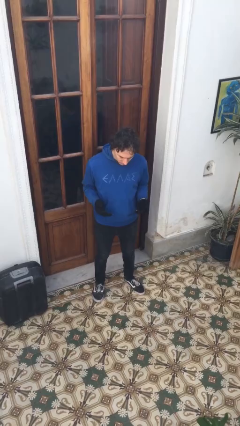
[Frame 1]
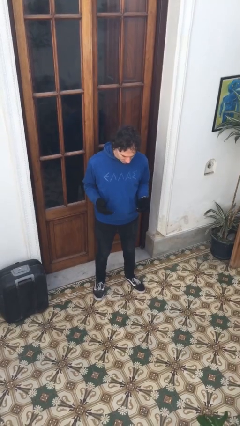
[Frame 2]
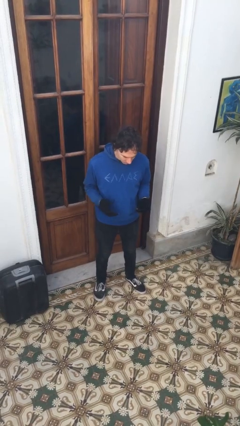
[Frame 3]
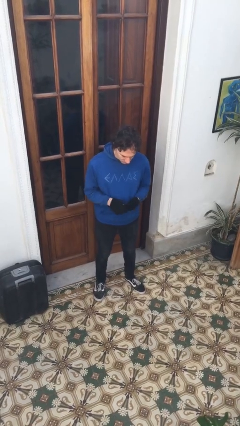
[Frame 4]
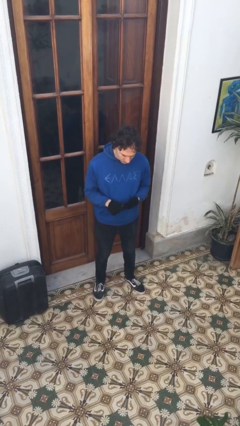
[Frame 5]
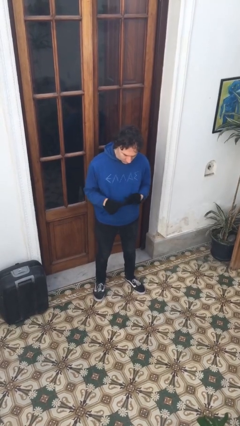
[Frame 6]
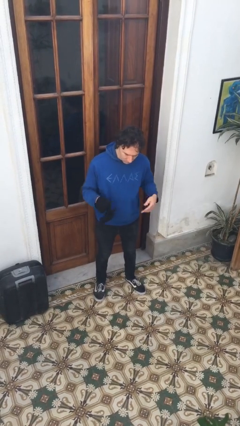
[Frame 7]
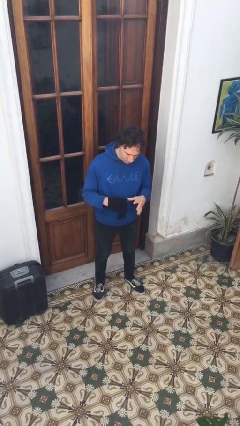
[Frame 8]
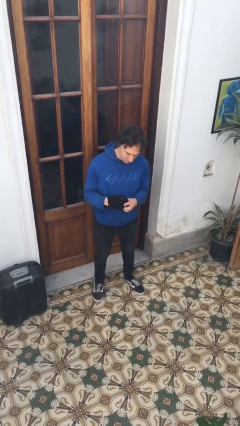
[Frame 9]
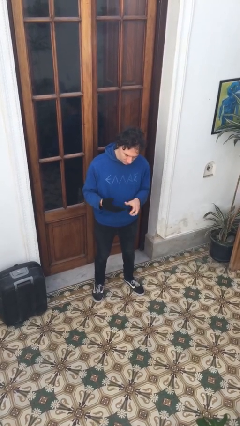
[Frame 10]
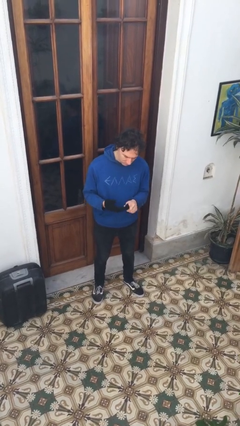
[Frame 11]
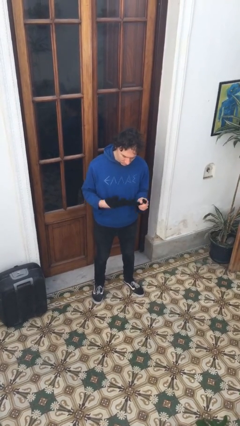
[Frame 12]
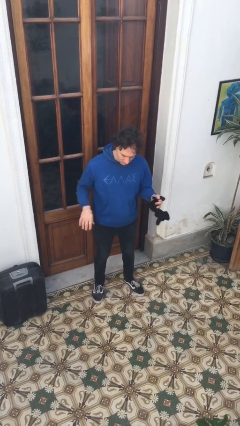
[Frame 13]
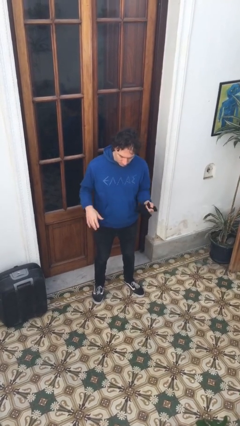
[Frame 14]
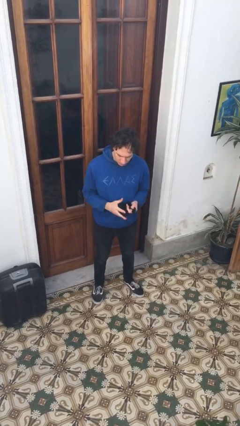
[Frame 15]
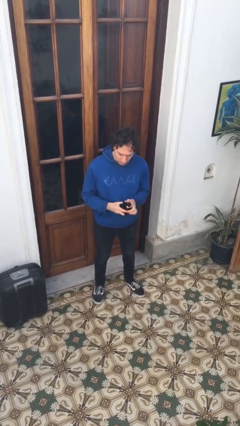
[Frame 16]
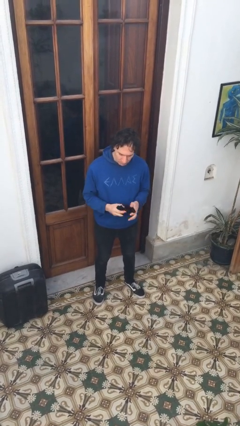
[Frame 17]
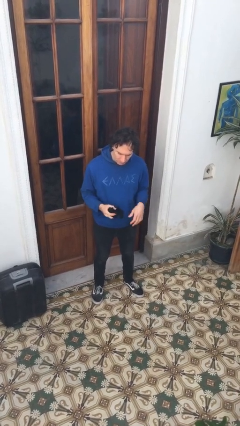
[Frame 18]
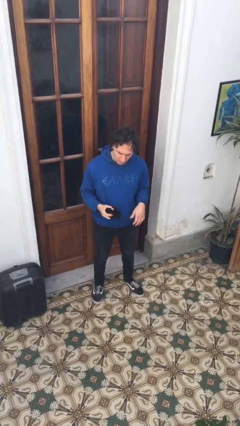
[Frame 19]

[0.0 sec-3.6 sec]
person takes off gloves

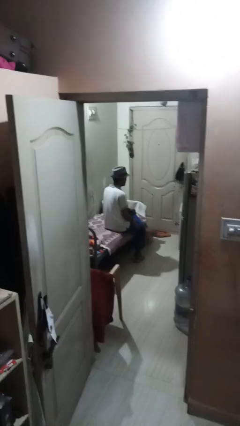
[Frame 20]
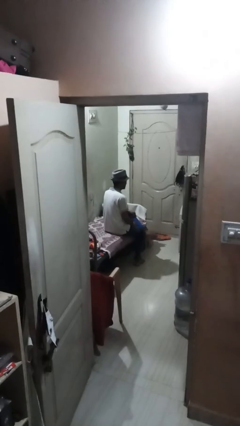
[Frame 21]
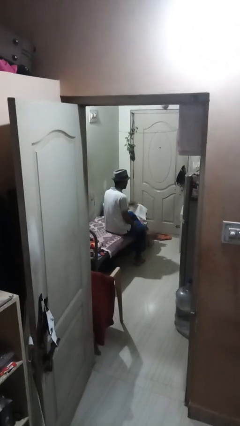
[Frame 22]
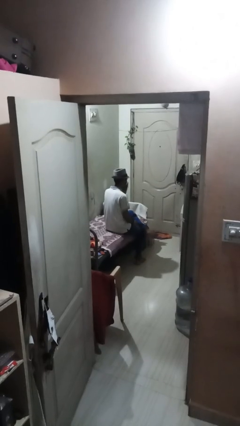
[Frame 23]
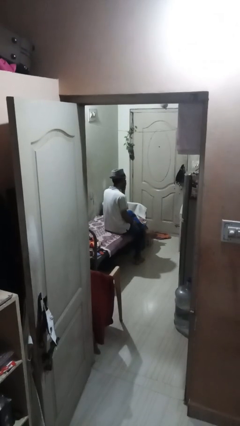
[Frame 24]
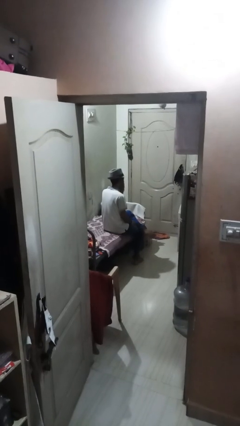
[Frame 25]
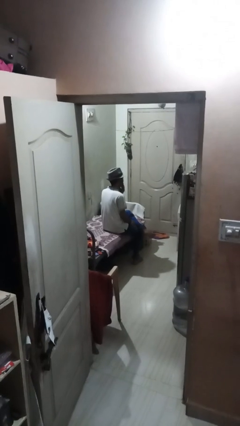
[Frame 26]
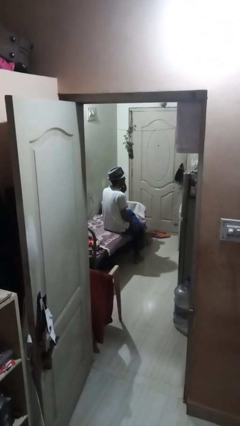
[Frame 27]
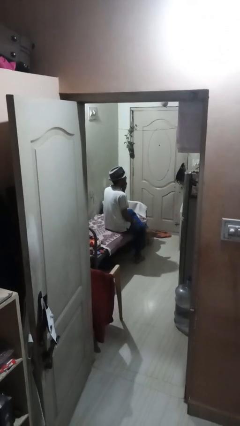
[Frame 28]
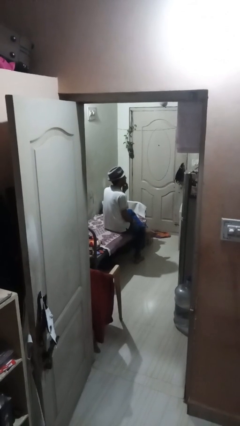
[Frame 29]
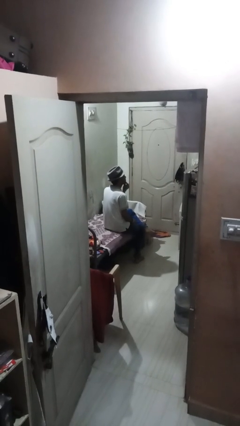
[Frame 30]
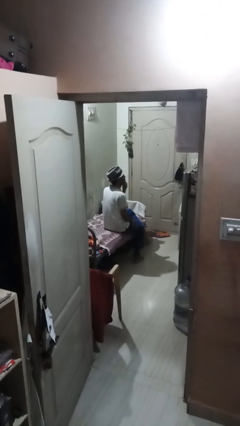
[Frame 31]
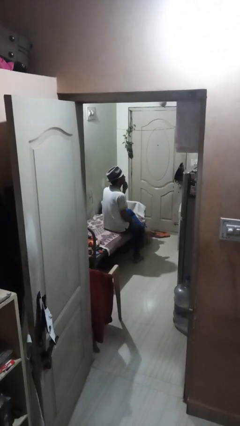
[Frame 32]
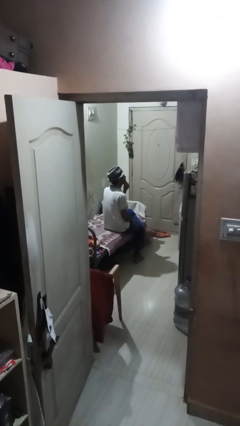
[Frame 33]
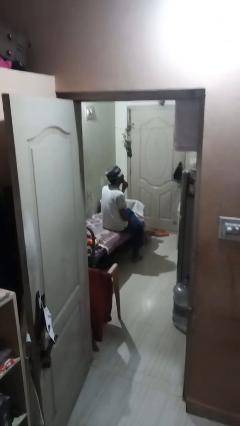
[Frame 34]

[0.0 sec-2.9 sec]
person strokes chin

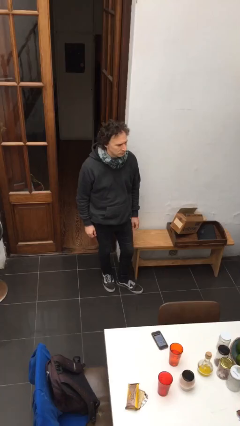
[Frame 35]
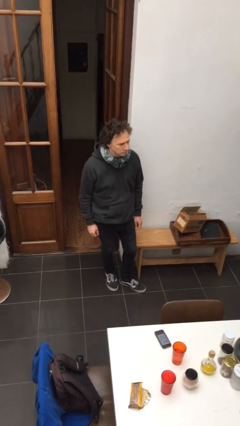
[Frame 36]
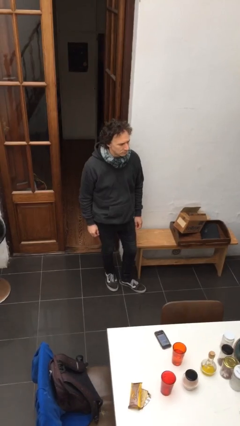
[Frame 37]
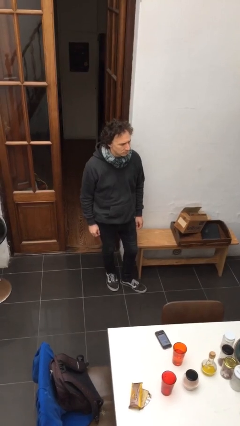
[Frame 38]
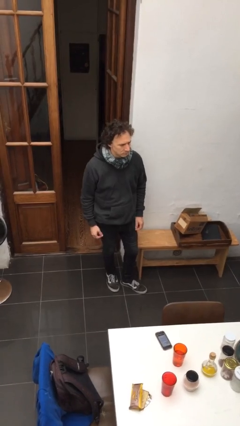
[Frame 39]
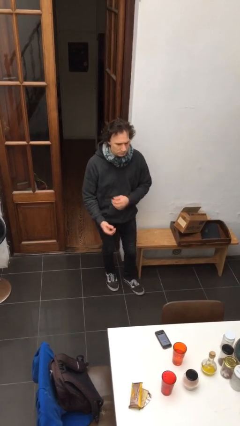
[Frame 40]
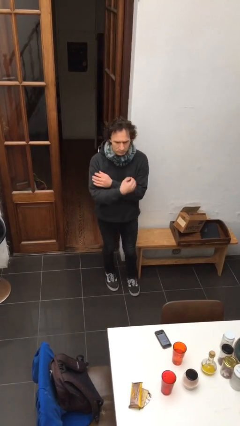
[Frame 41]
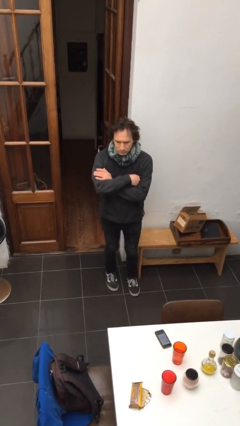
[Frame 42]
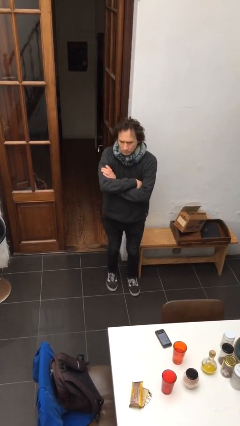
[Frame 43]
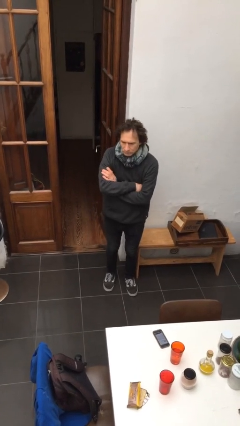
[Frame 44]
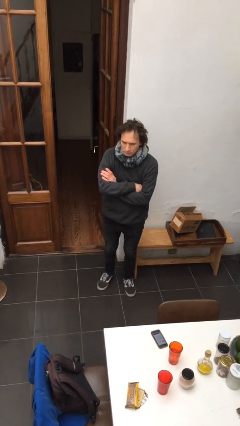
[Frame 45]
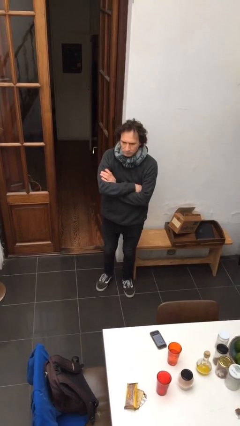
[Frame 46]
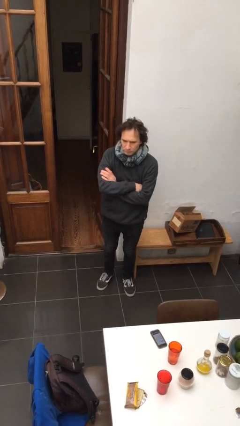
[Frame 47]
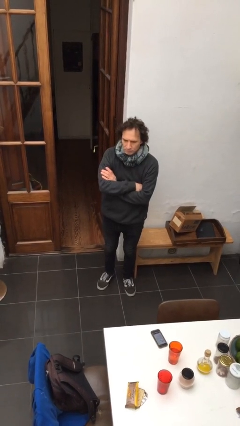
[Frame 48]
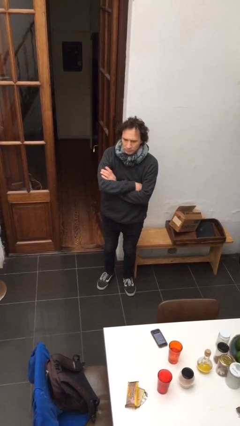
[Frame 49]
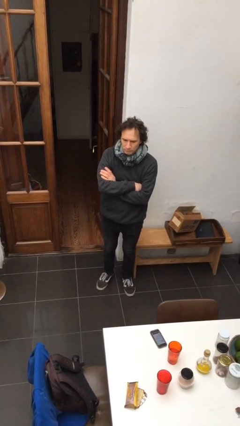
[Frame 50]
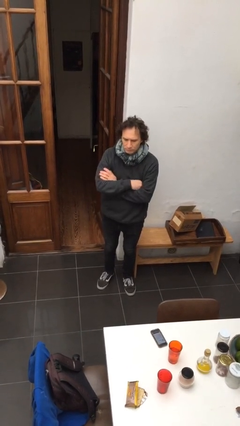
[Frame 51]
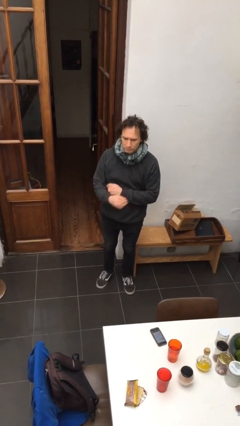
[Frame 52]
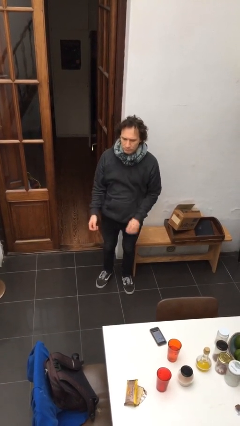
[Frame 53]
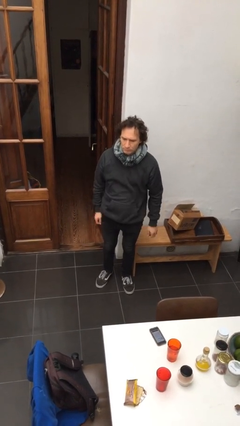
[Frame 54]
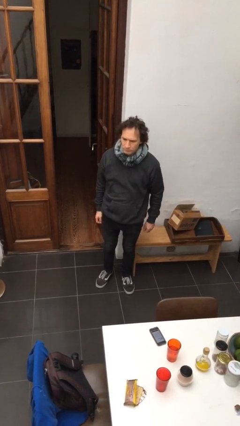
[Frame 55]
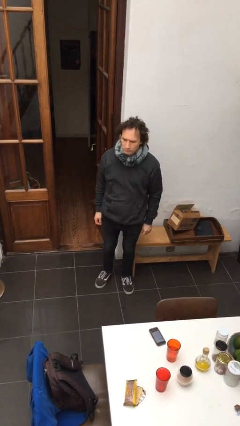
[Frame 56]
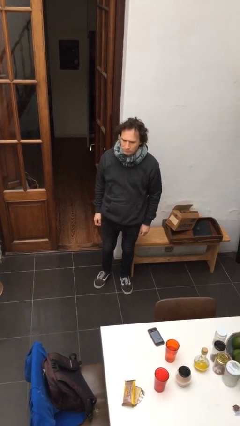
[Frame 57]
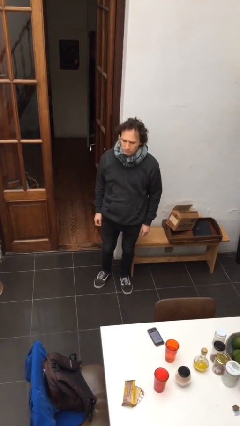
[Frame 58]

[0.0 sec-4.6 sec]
person crosses arms

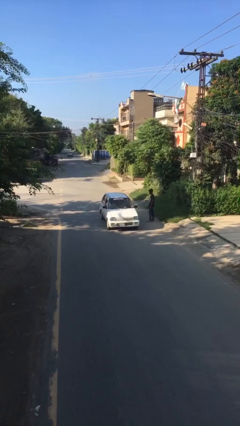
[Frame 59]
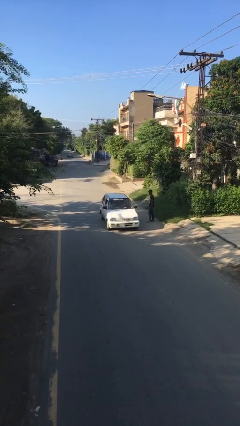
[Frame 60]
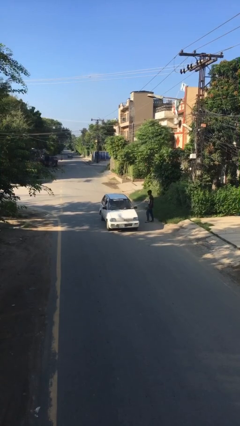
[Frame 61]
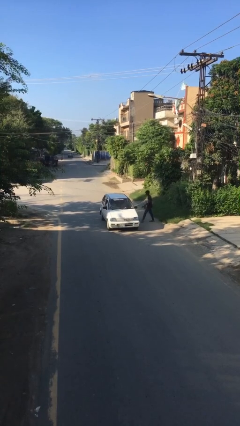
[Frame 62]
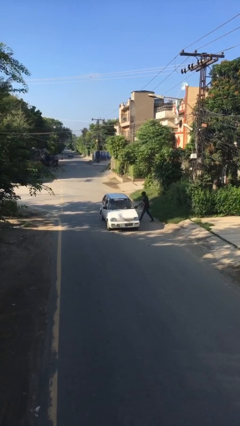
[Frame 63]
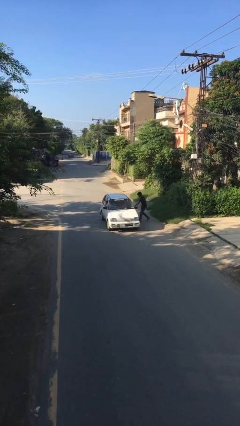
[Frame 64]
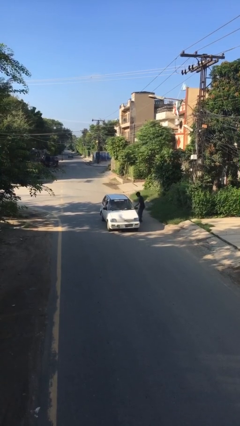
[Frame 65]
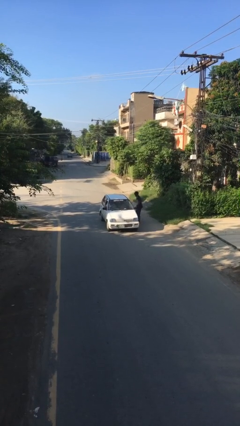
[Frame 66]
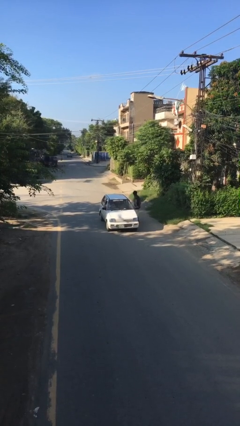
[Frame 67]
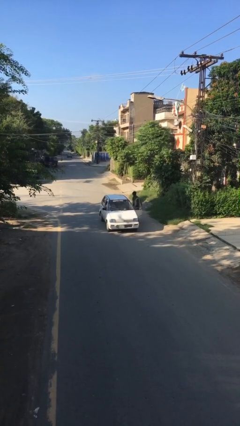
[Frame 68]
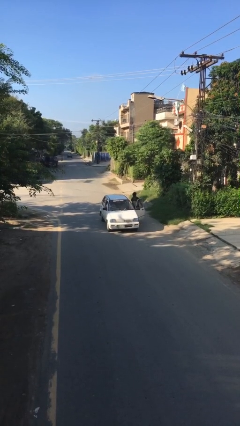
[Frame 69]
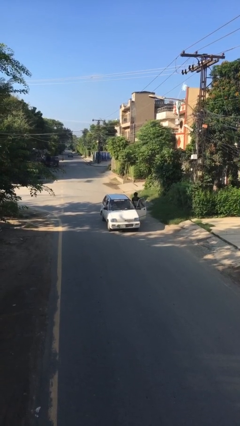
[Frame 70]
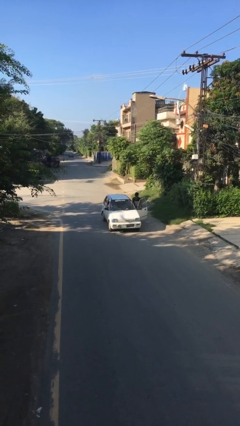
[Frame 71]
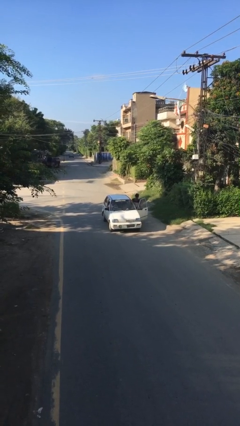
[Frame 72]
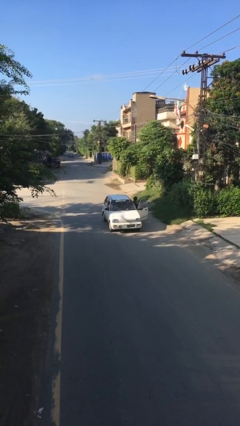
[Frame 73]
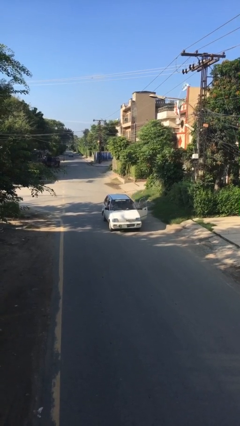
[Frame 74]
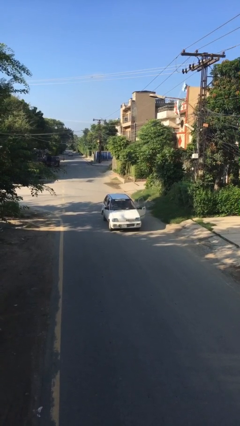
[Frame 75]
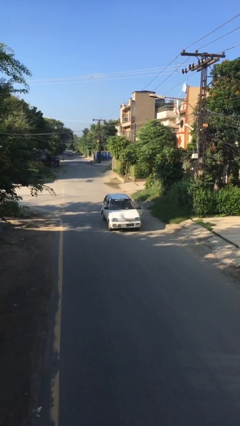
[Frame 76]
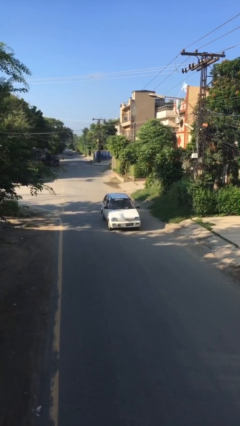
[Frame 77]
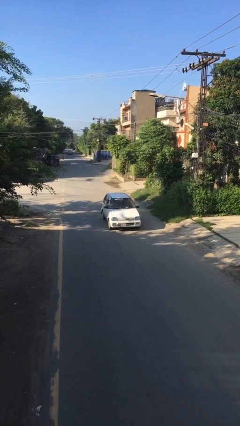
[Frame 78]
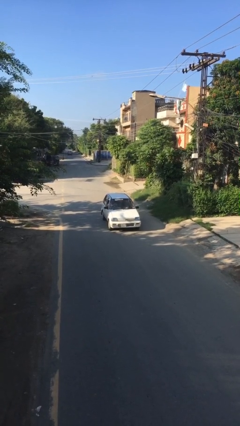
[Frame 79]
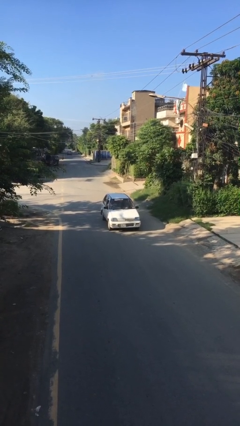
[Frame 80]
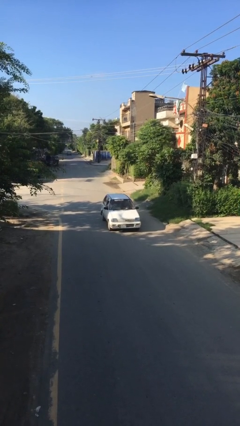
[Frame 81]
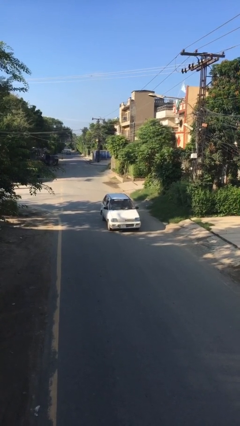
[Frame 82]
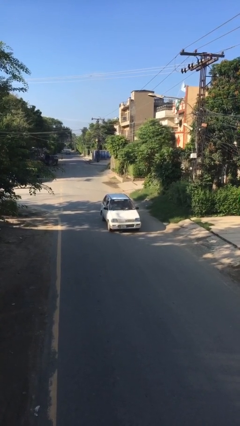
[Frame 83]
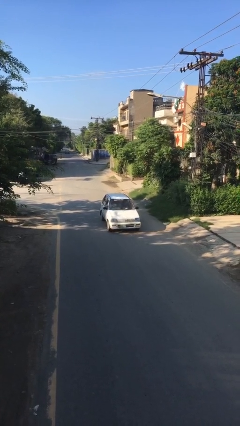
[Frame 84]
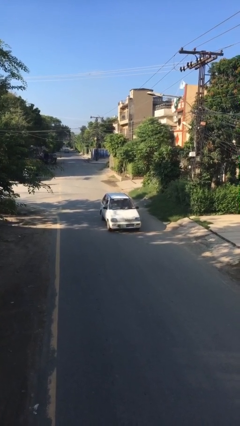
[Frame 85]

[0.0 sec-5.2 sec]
car picks up person

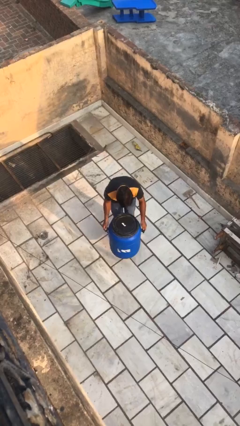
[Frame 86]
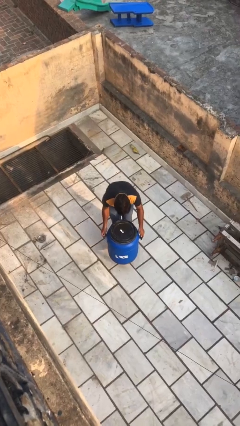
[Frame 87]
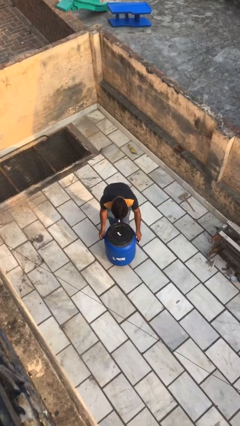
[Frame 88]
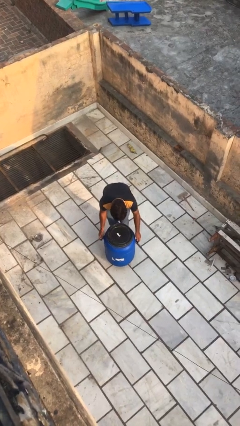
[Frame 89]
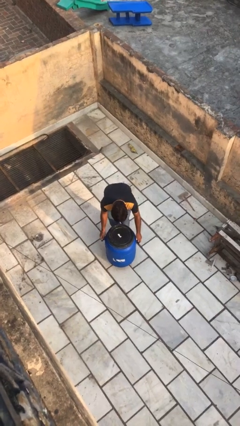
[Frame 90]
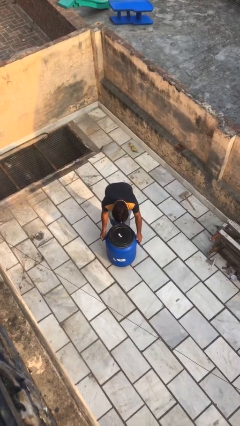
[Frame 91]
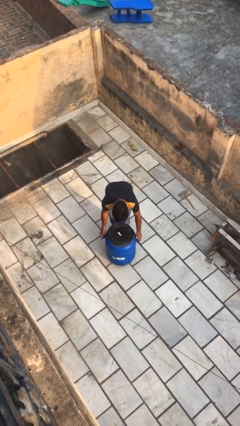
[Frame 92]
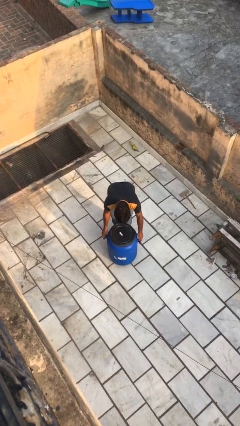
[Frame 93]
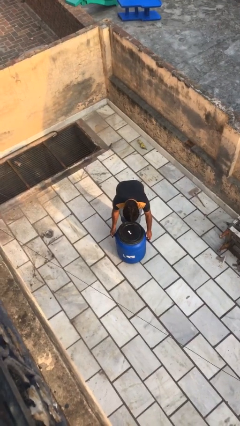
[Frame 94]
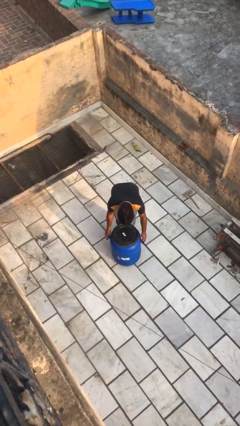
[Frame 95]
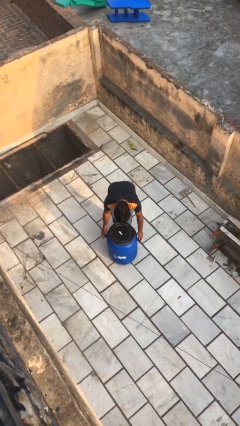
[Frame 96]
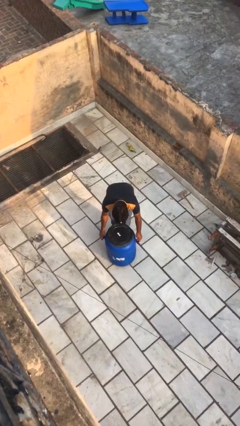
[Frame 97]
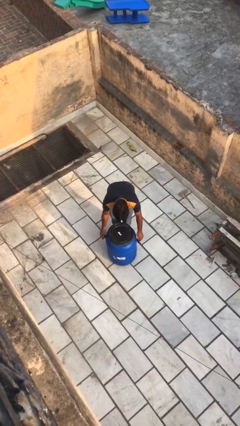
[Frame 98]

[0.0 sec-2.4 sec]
person puts down object on floor
